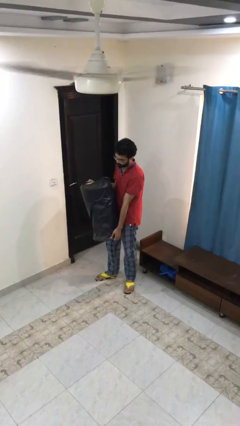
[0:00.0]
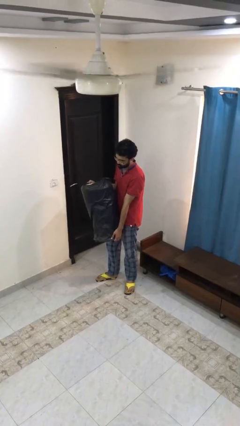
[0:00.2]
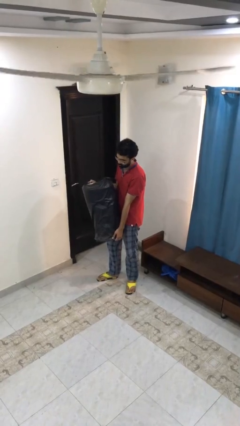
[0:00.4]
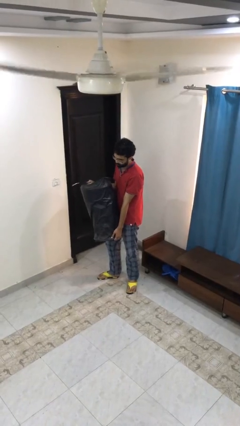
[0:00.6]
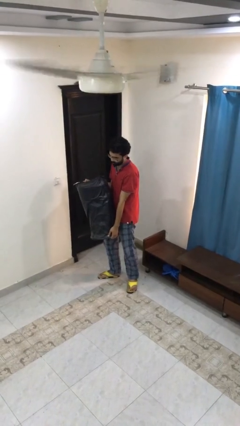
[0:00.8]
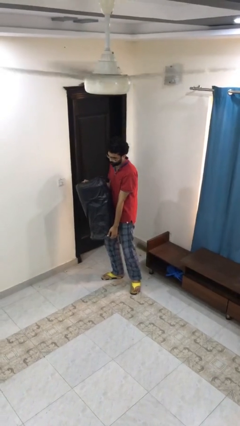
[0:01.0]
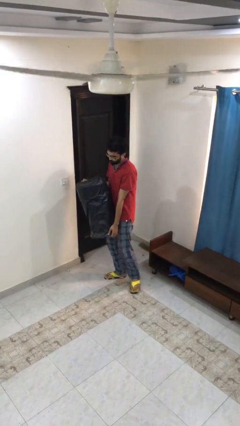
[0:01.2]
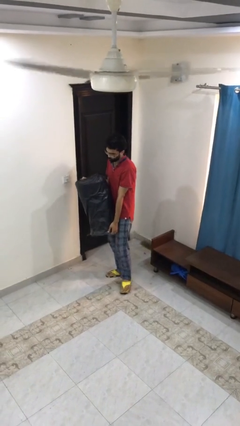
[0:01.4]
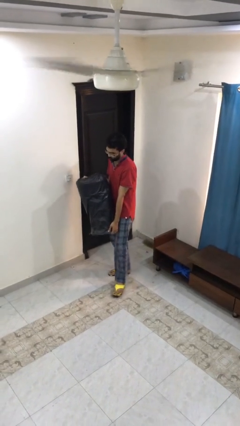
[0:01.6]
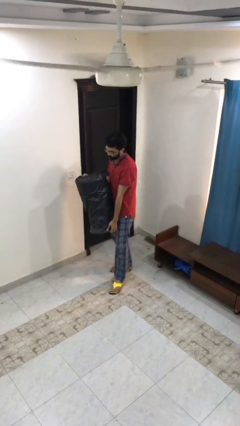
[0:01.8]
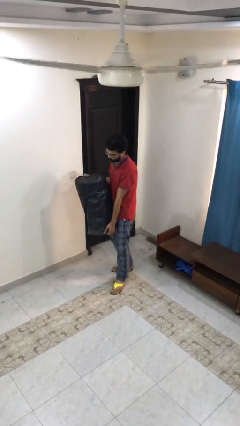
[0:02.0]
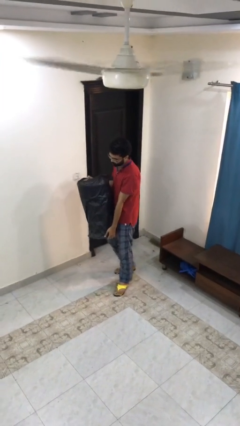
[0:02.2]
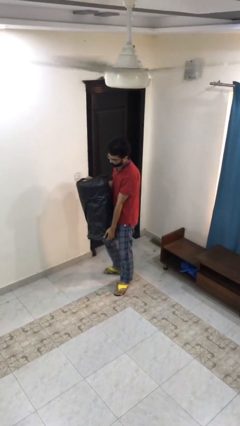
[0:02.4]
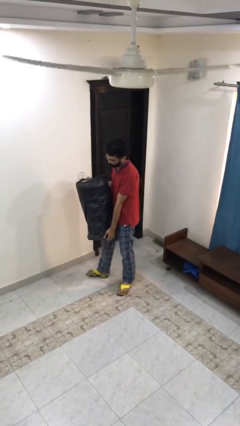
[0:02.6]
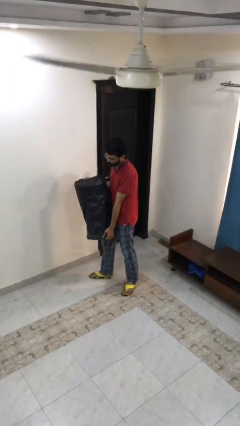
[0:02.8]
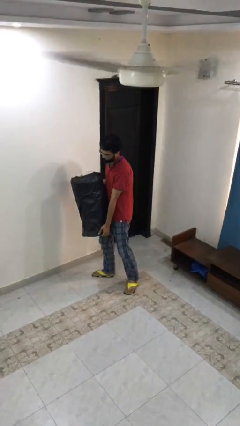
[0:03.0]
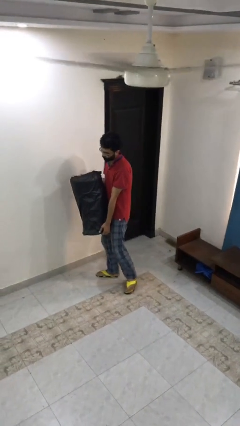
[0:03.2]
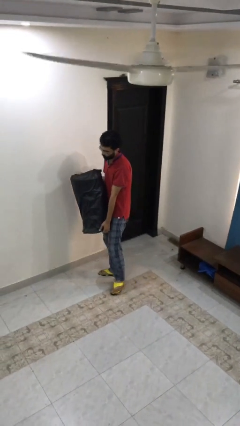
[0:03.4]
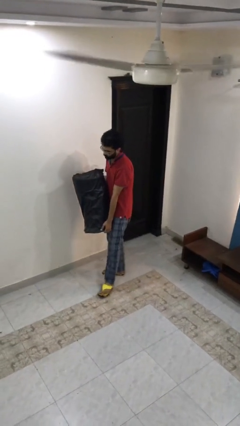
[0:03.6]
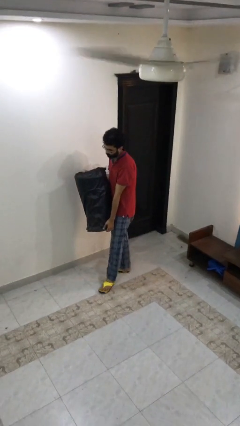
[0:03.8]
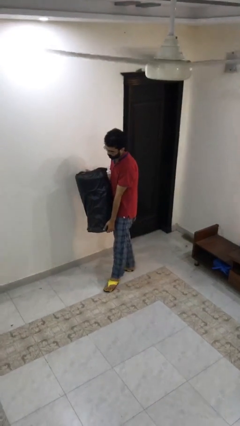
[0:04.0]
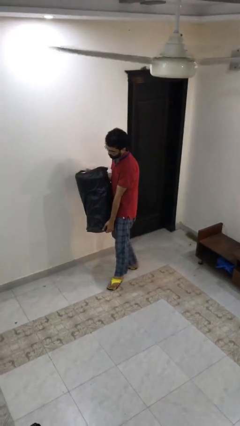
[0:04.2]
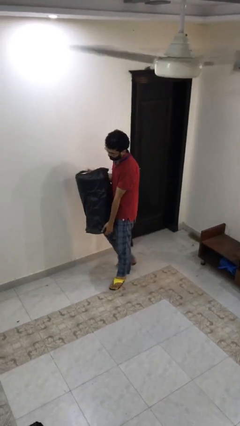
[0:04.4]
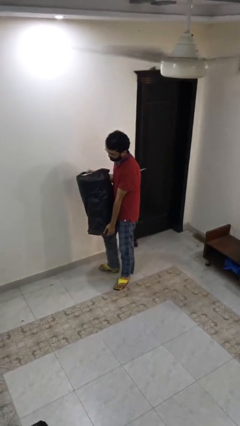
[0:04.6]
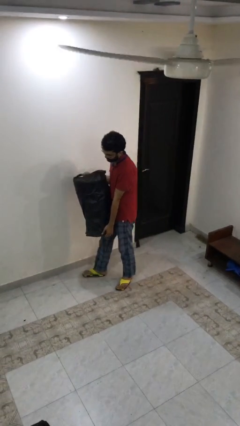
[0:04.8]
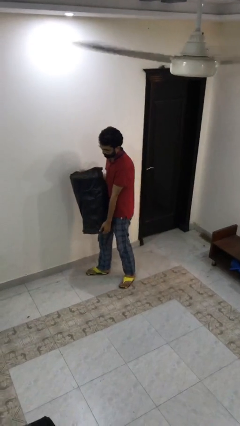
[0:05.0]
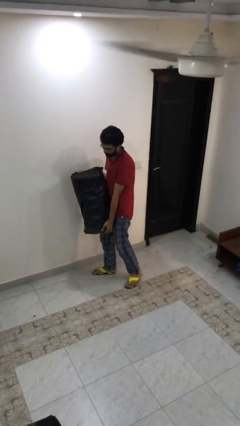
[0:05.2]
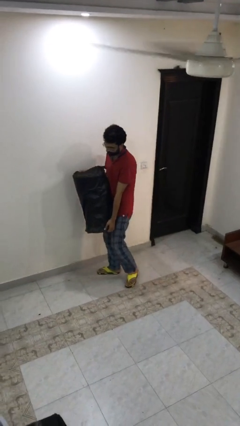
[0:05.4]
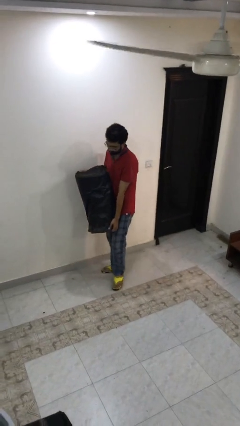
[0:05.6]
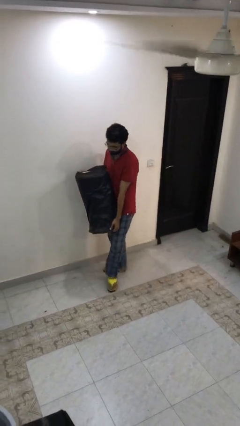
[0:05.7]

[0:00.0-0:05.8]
person carries heavy object

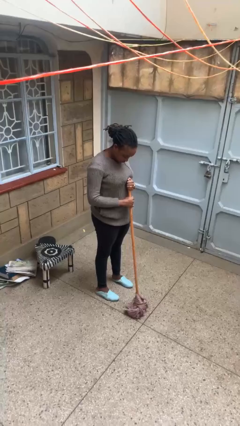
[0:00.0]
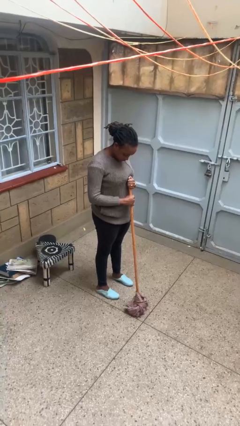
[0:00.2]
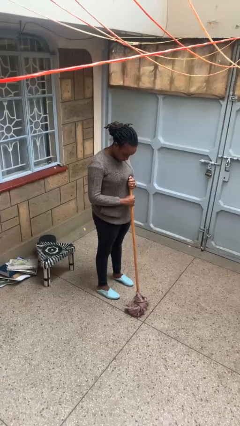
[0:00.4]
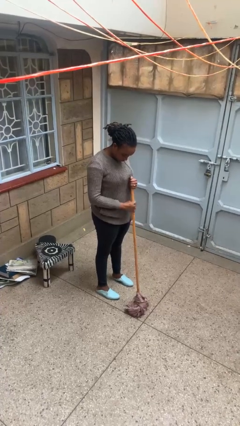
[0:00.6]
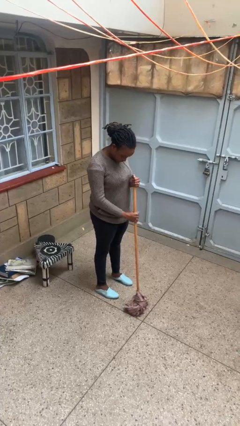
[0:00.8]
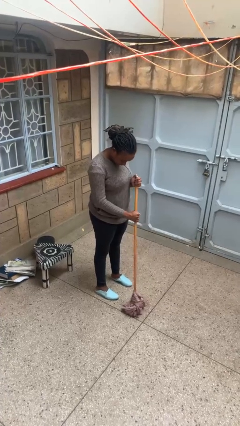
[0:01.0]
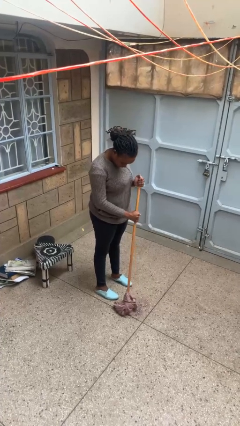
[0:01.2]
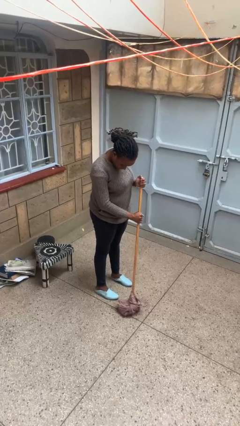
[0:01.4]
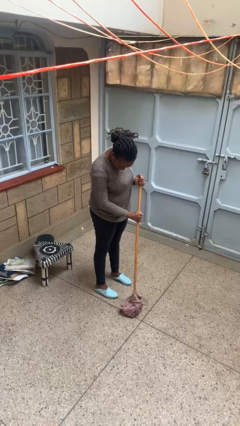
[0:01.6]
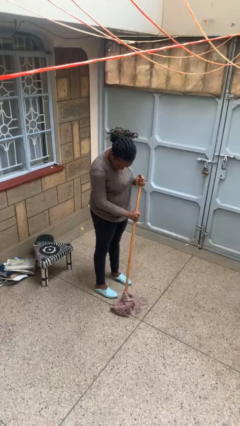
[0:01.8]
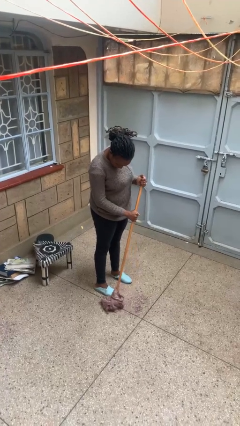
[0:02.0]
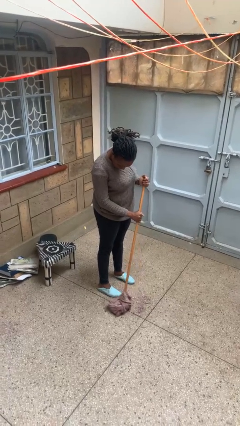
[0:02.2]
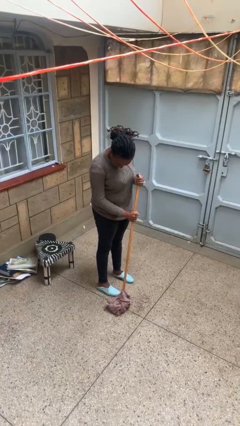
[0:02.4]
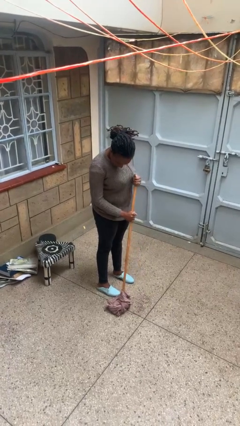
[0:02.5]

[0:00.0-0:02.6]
person mops

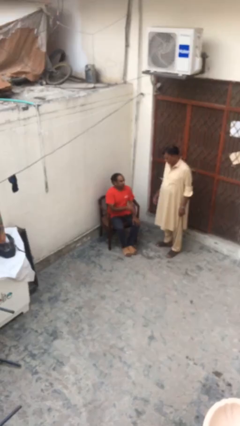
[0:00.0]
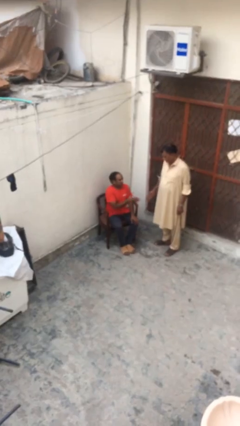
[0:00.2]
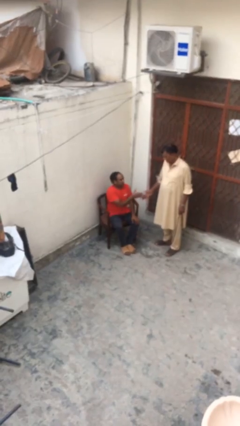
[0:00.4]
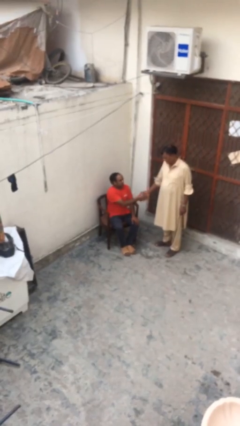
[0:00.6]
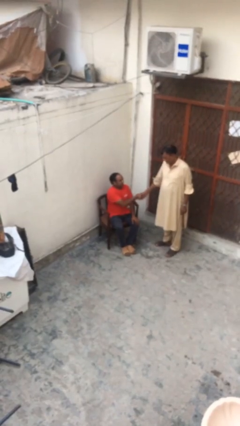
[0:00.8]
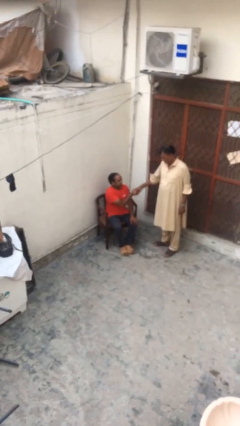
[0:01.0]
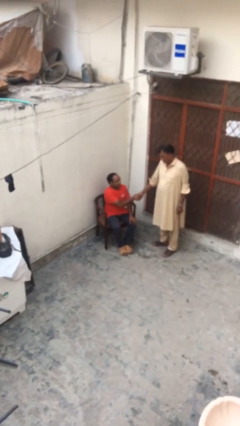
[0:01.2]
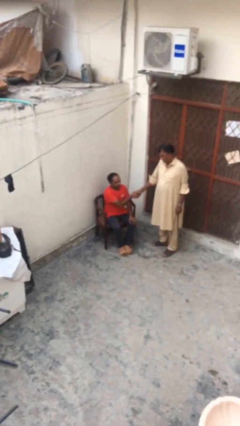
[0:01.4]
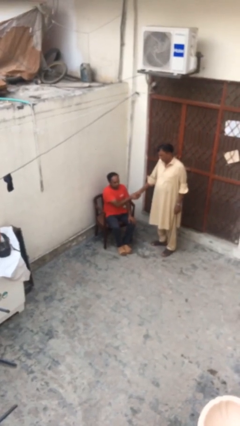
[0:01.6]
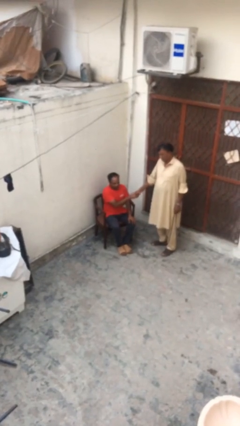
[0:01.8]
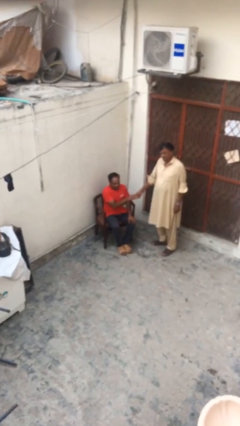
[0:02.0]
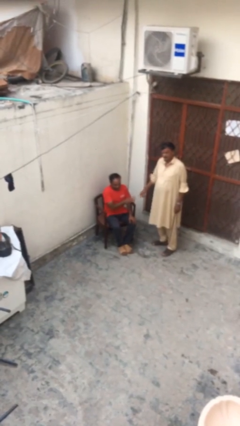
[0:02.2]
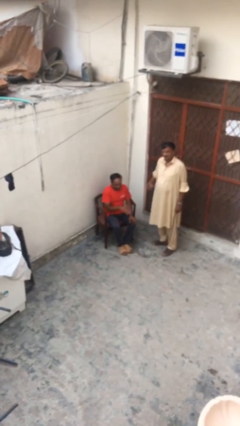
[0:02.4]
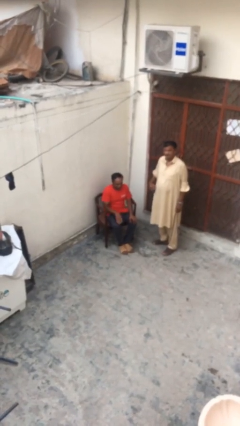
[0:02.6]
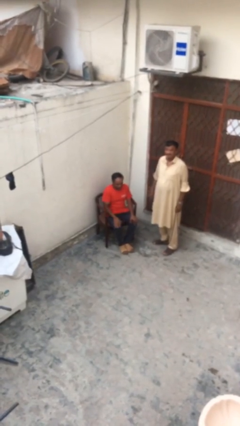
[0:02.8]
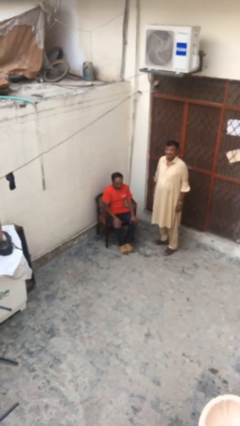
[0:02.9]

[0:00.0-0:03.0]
person shakes hand

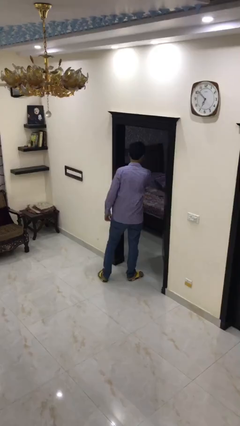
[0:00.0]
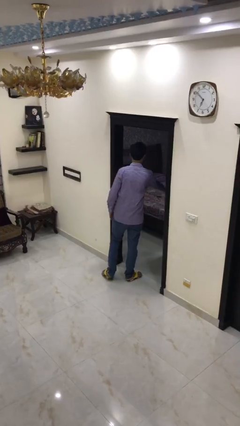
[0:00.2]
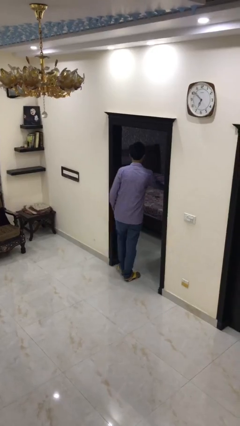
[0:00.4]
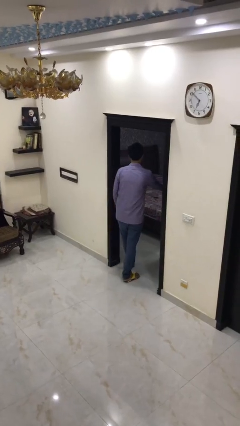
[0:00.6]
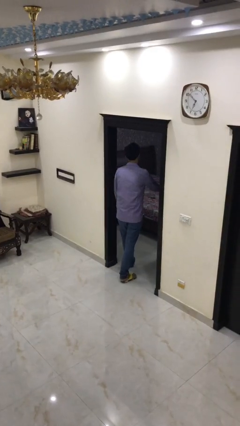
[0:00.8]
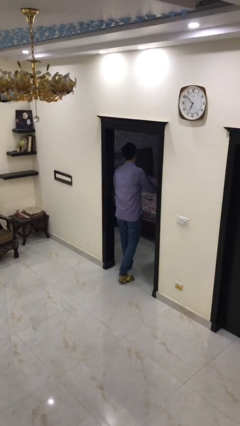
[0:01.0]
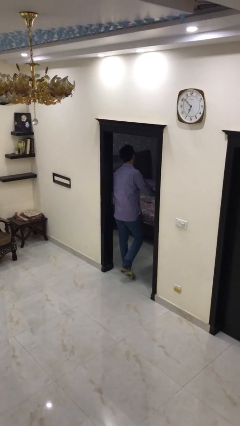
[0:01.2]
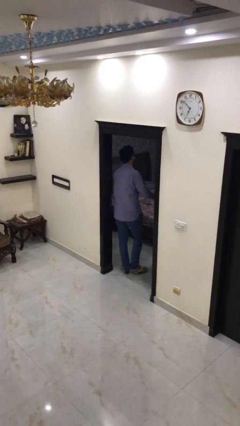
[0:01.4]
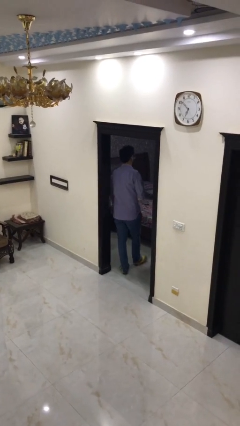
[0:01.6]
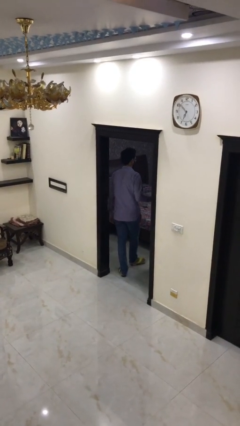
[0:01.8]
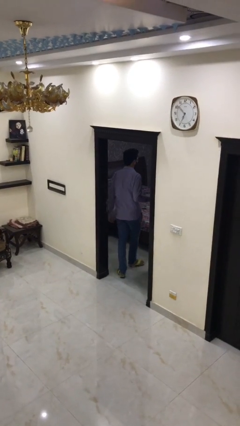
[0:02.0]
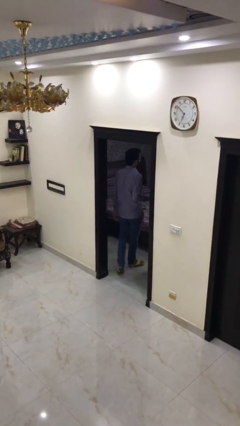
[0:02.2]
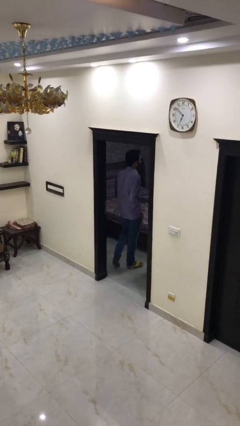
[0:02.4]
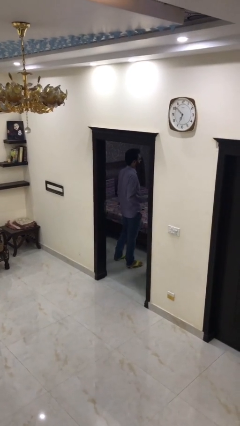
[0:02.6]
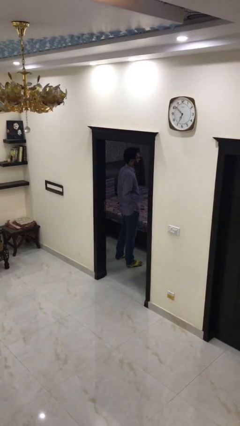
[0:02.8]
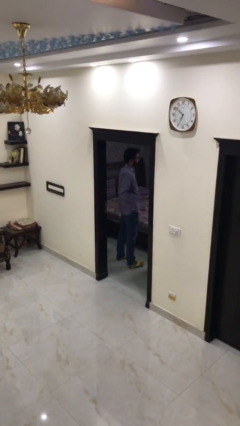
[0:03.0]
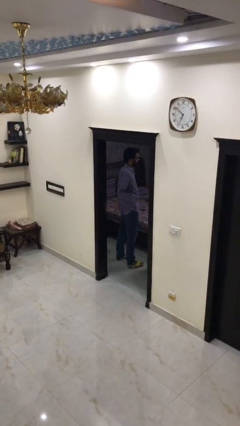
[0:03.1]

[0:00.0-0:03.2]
person exits scene through structure

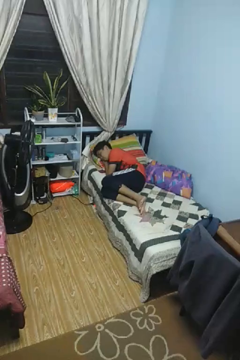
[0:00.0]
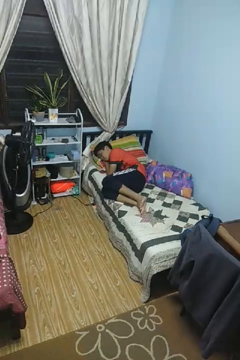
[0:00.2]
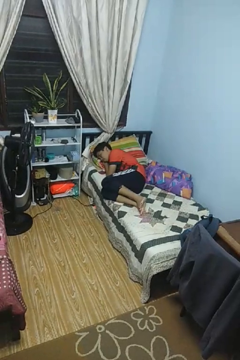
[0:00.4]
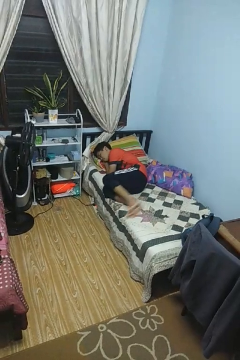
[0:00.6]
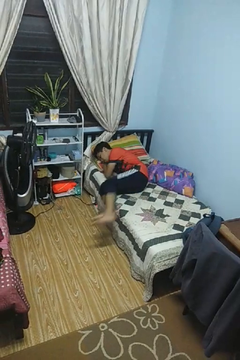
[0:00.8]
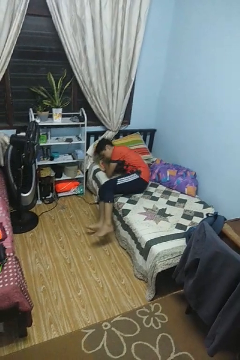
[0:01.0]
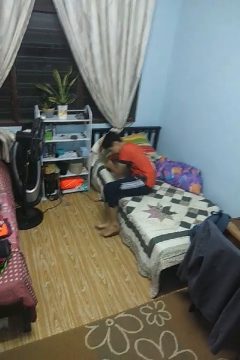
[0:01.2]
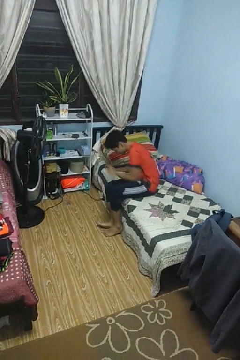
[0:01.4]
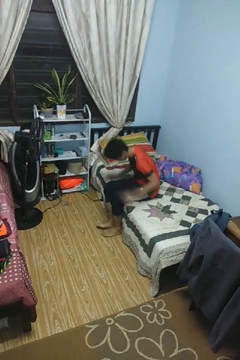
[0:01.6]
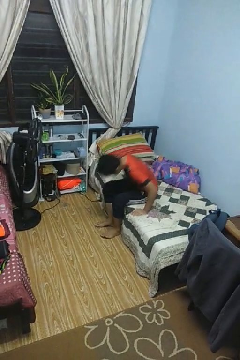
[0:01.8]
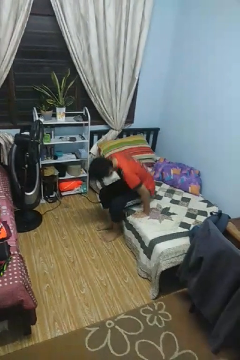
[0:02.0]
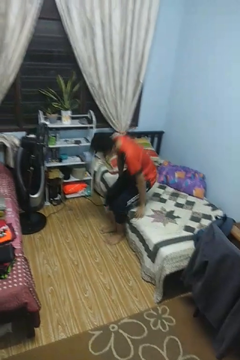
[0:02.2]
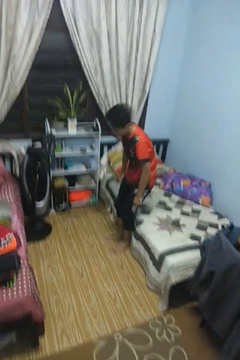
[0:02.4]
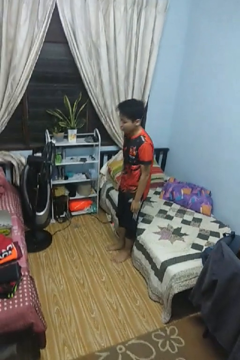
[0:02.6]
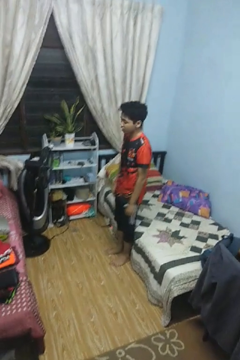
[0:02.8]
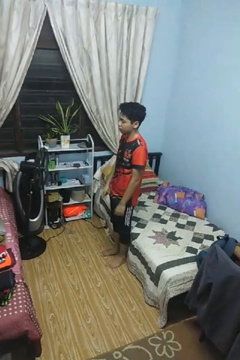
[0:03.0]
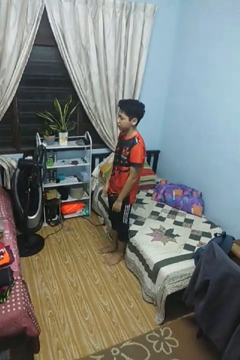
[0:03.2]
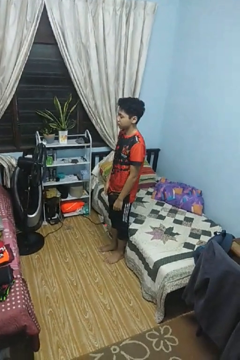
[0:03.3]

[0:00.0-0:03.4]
person stands up

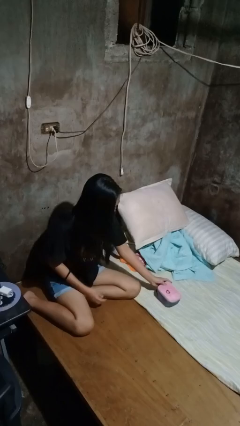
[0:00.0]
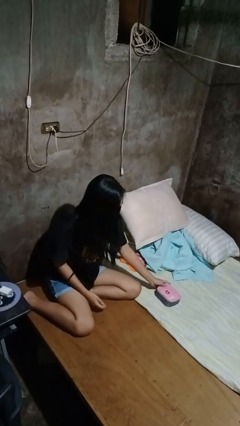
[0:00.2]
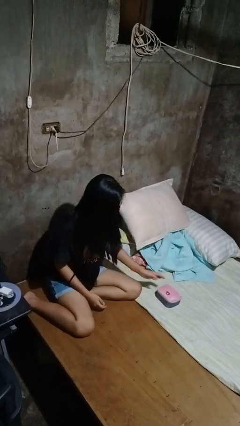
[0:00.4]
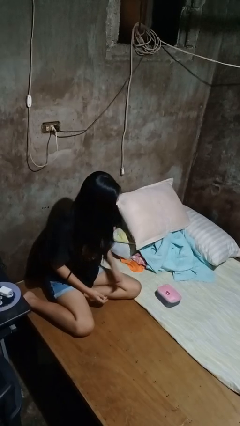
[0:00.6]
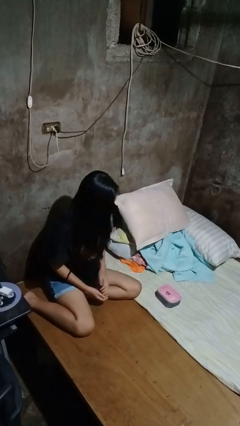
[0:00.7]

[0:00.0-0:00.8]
person puts down object on bed
